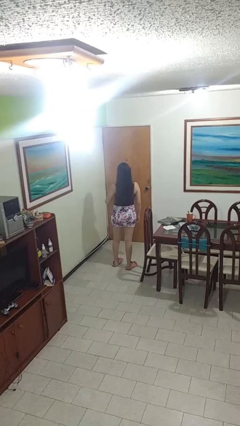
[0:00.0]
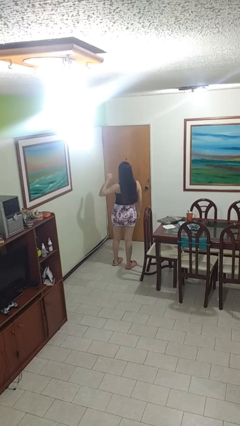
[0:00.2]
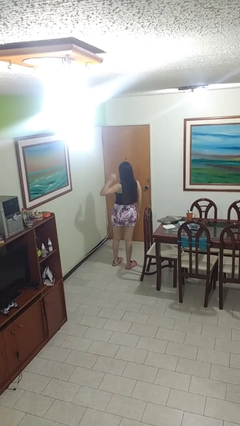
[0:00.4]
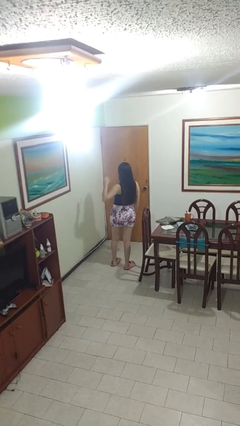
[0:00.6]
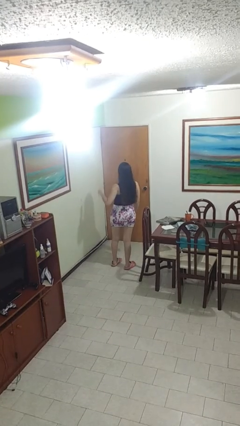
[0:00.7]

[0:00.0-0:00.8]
person gestures behind me

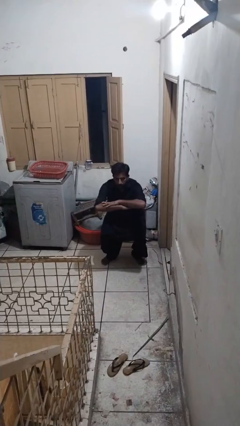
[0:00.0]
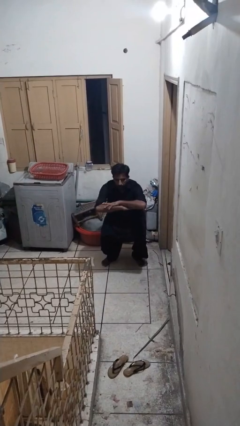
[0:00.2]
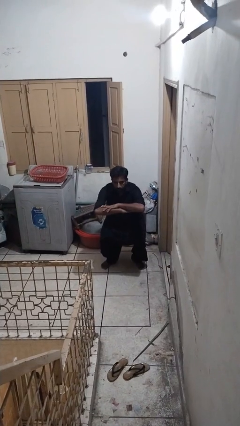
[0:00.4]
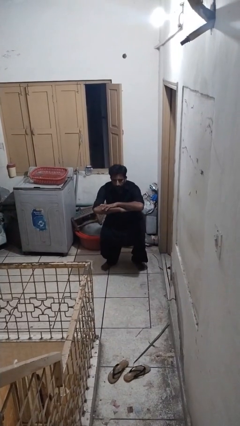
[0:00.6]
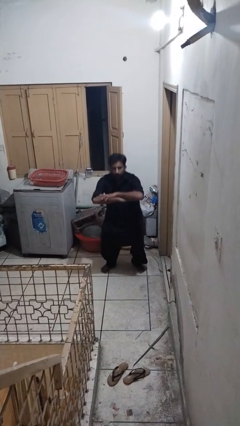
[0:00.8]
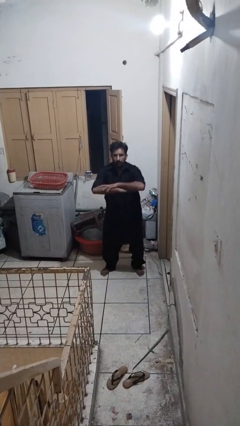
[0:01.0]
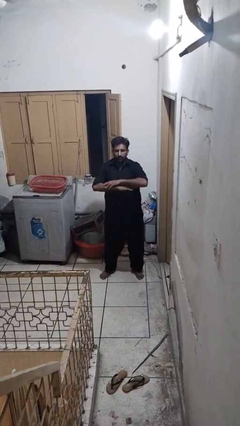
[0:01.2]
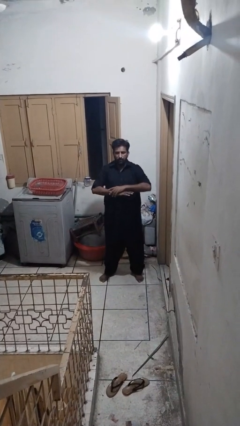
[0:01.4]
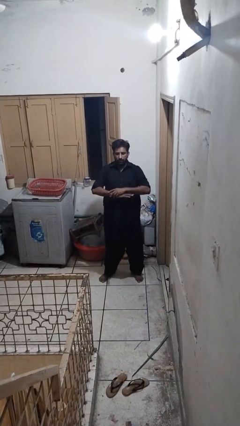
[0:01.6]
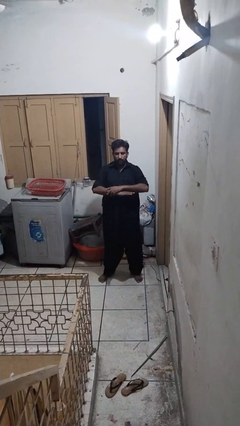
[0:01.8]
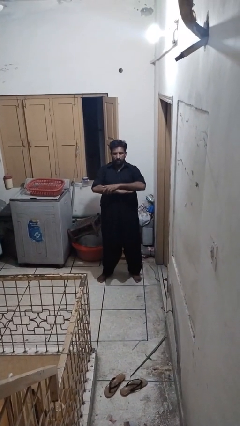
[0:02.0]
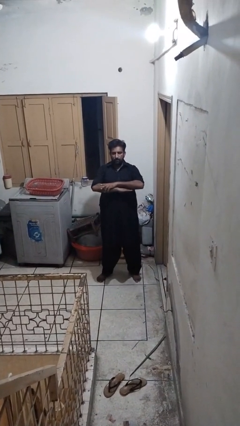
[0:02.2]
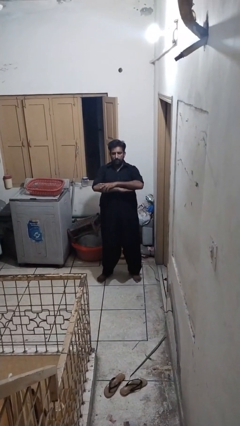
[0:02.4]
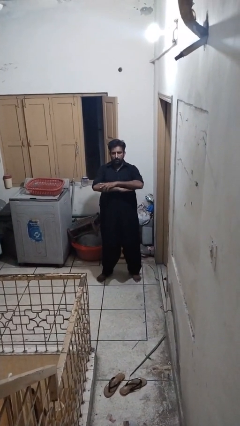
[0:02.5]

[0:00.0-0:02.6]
person stands up

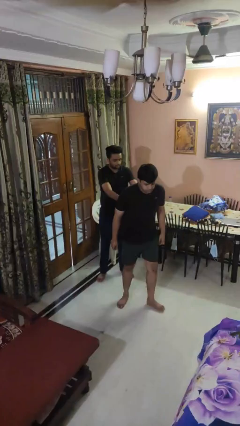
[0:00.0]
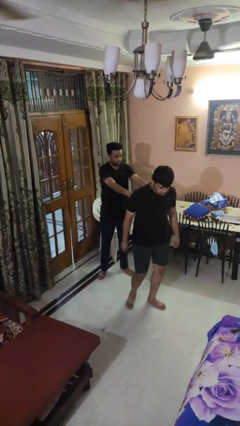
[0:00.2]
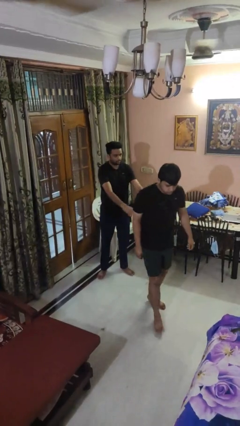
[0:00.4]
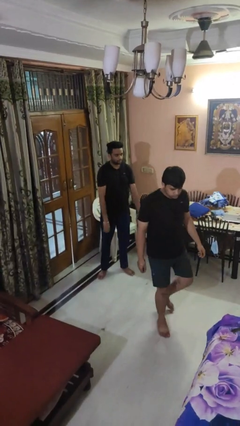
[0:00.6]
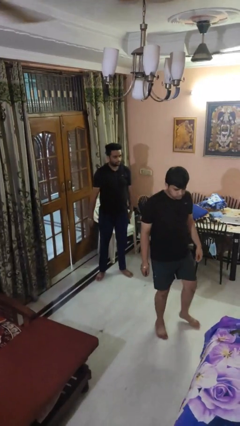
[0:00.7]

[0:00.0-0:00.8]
person shoves person

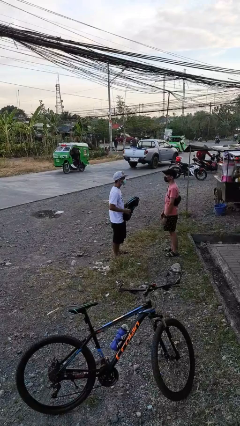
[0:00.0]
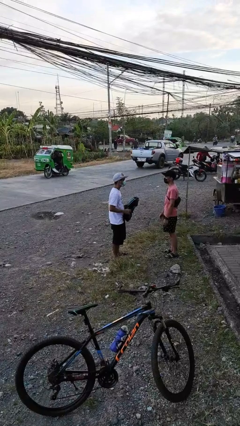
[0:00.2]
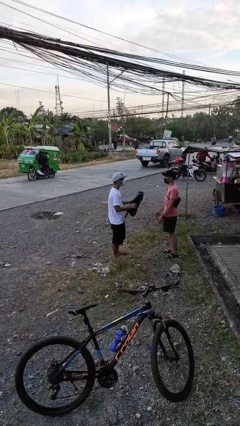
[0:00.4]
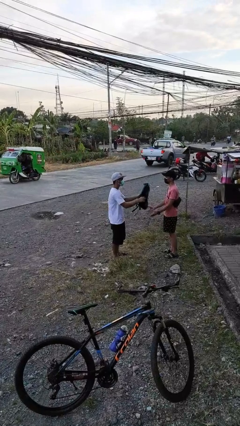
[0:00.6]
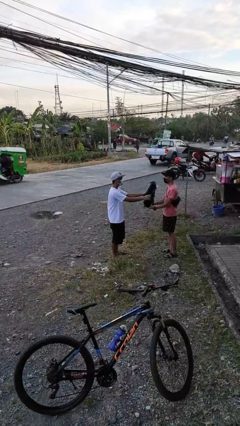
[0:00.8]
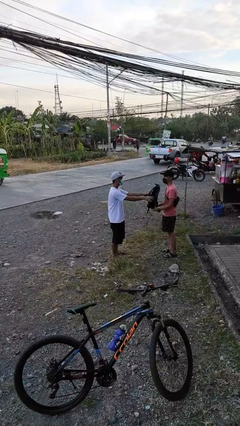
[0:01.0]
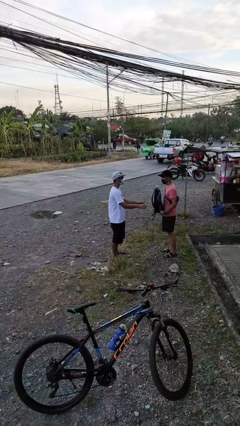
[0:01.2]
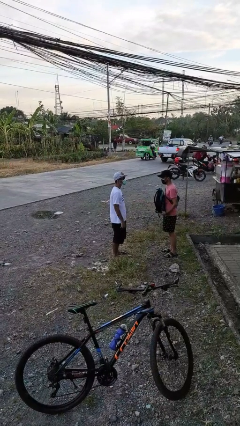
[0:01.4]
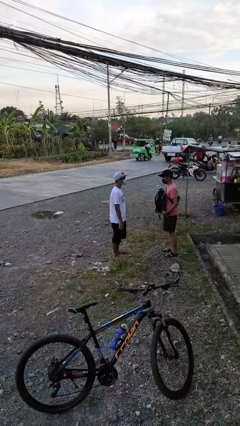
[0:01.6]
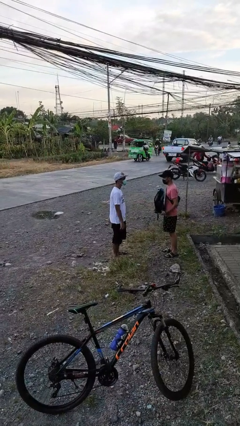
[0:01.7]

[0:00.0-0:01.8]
person transfers object to person

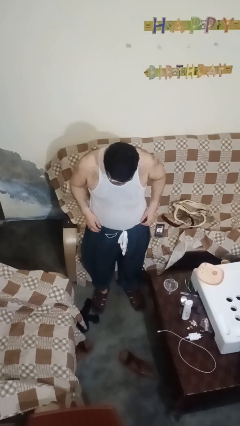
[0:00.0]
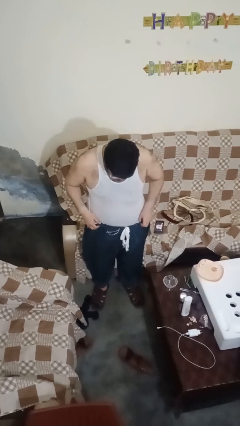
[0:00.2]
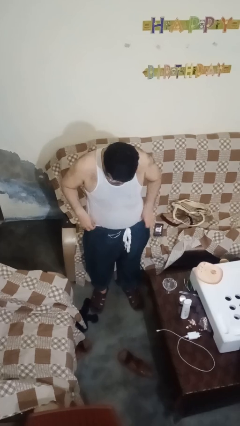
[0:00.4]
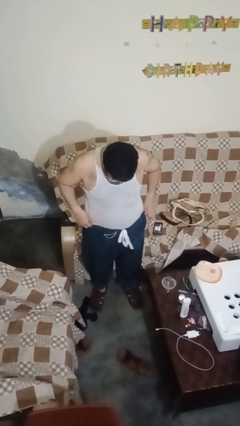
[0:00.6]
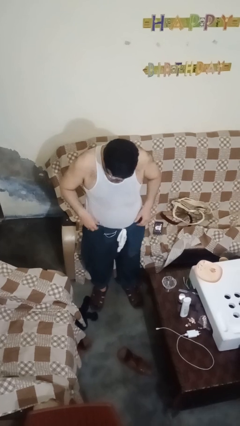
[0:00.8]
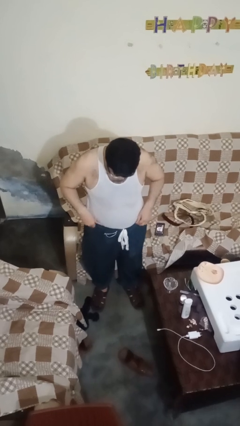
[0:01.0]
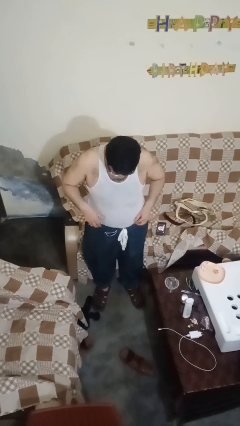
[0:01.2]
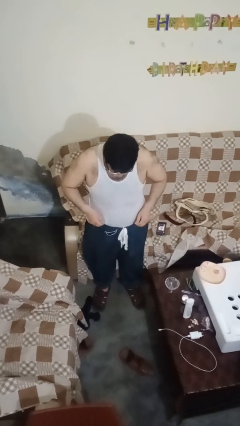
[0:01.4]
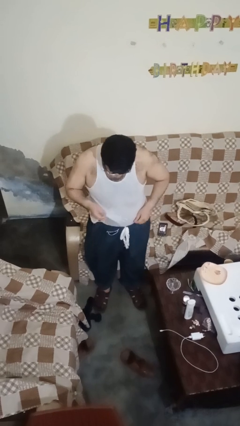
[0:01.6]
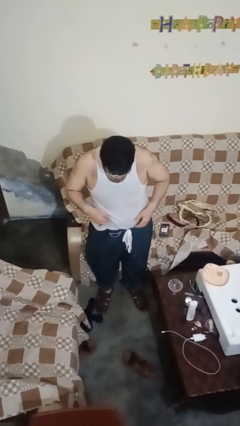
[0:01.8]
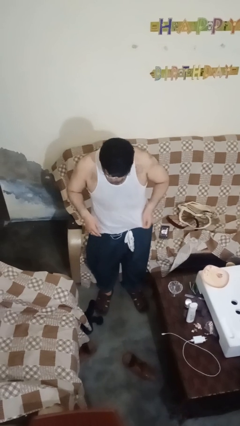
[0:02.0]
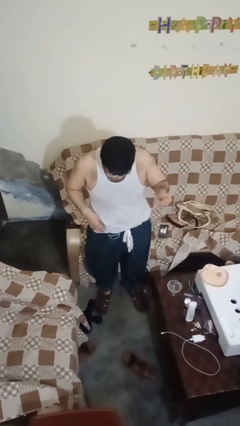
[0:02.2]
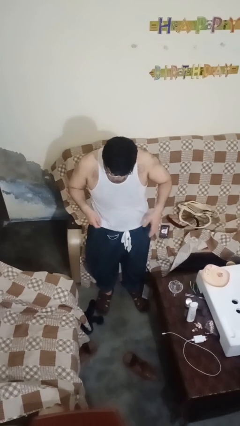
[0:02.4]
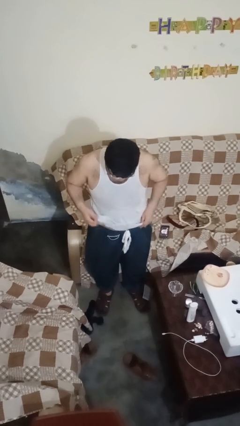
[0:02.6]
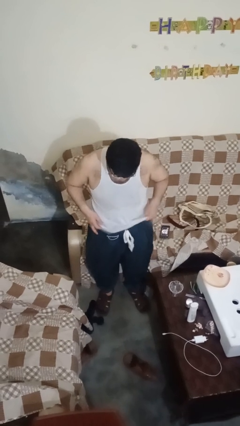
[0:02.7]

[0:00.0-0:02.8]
person untucks shirt

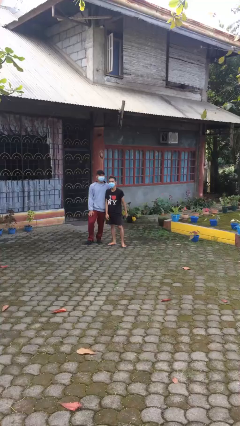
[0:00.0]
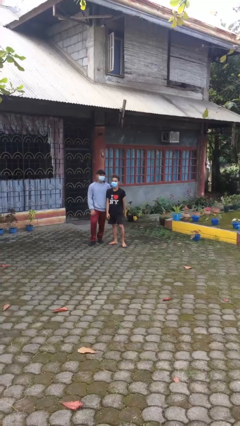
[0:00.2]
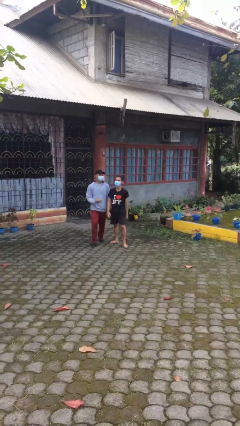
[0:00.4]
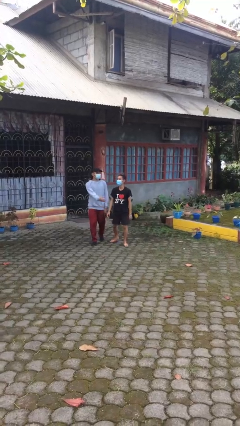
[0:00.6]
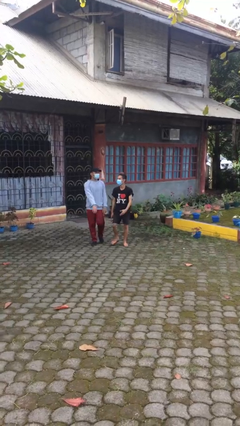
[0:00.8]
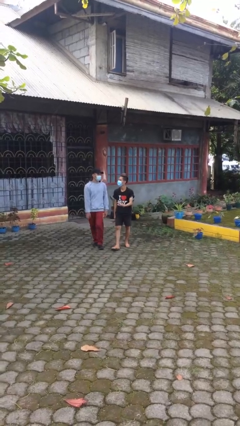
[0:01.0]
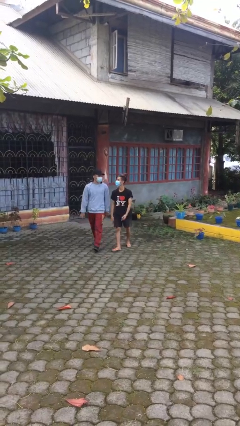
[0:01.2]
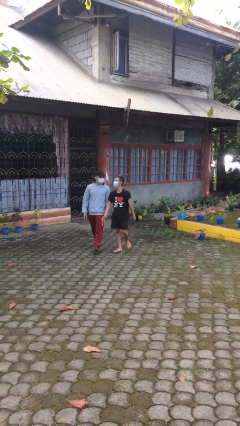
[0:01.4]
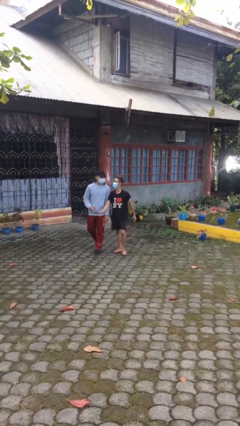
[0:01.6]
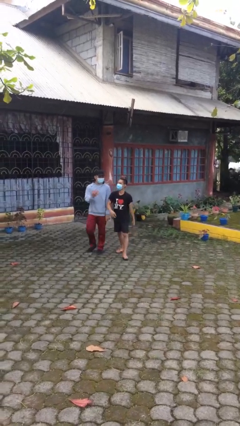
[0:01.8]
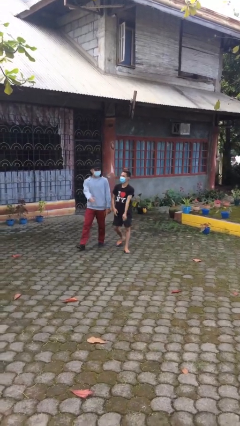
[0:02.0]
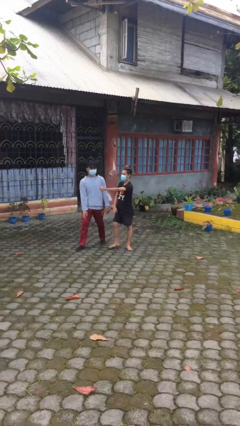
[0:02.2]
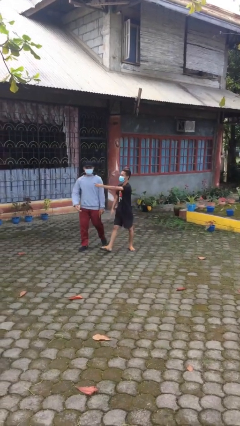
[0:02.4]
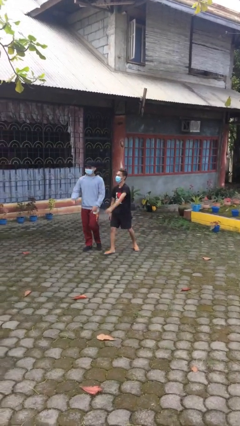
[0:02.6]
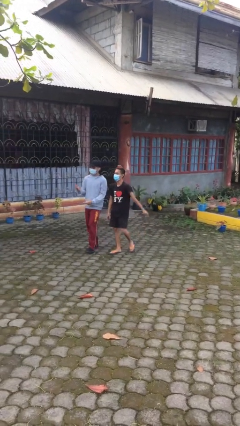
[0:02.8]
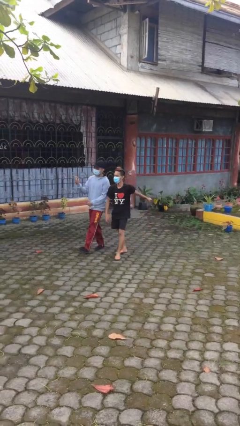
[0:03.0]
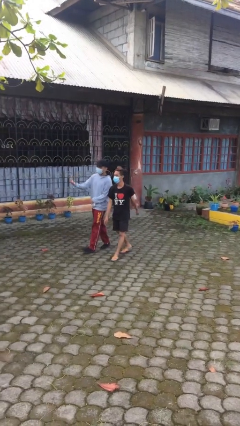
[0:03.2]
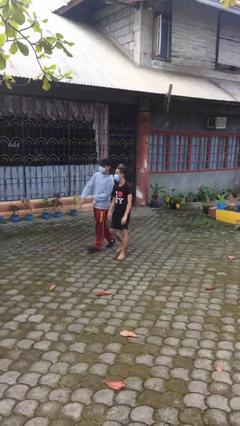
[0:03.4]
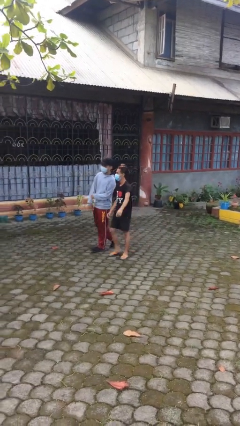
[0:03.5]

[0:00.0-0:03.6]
person talks to person

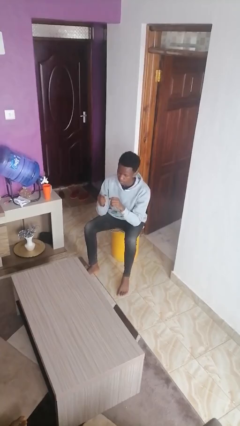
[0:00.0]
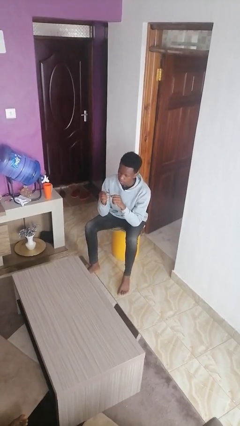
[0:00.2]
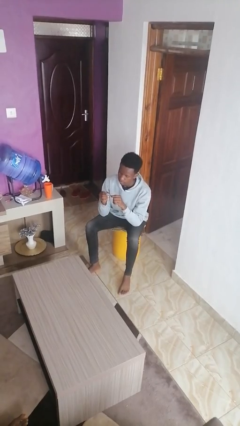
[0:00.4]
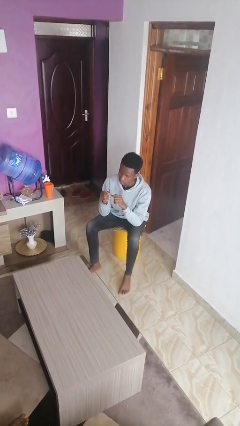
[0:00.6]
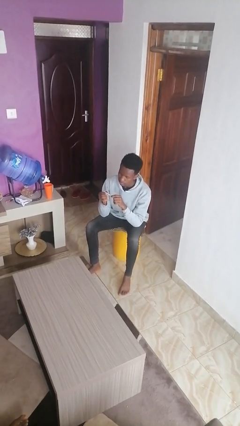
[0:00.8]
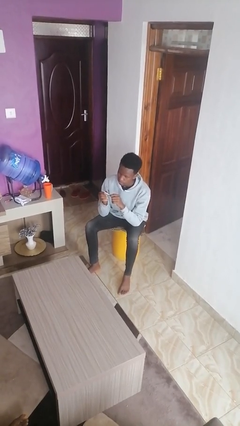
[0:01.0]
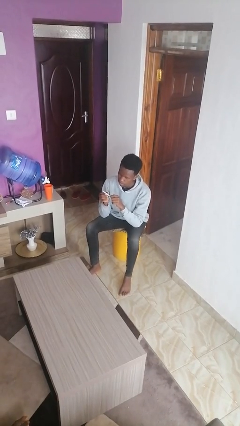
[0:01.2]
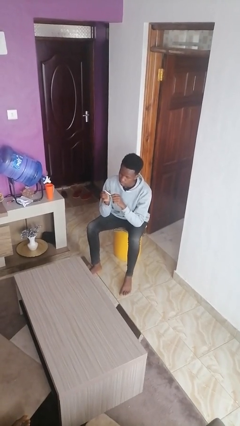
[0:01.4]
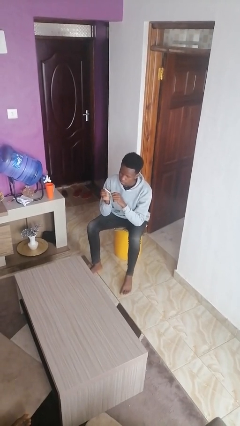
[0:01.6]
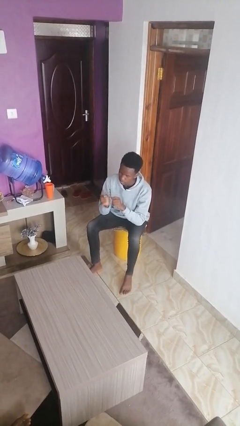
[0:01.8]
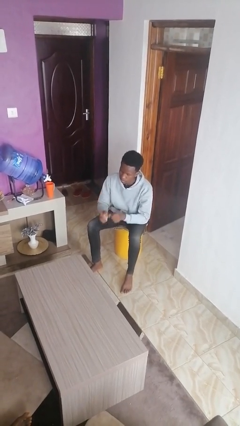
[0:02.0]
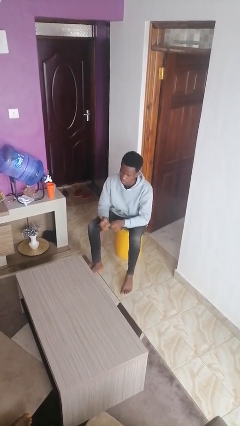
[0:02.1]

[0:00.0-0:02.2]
person files fingernails

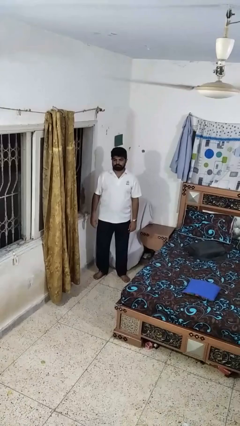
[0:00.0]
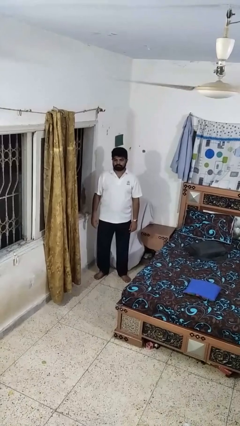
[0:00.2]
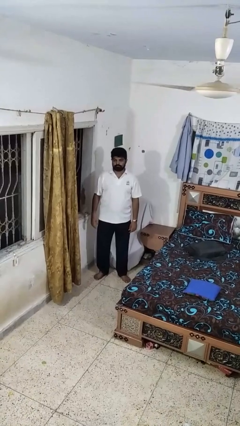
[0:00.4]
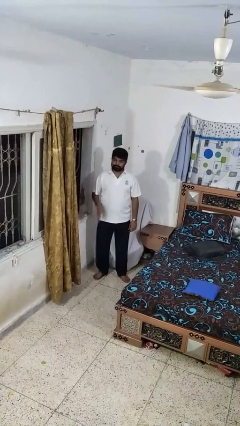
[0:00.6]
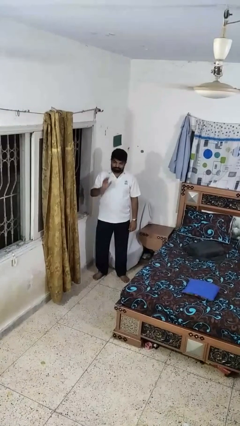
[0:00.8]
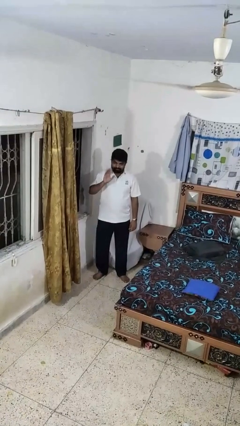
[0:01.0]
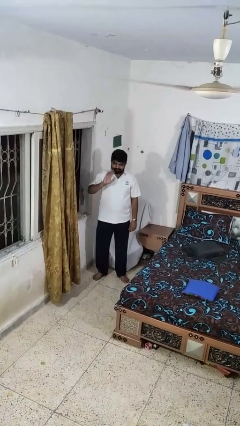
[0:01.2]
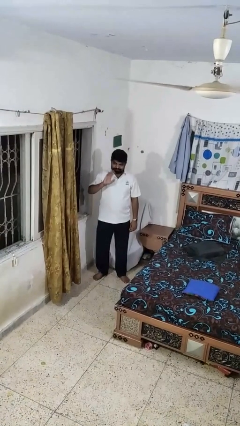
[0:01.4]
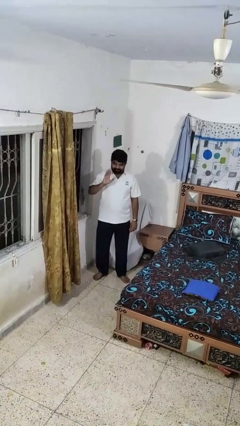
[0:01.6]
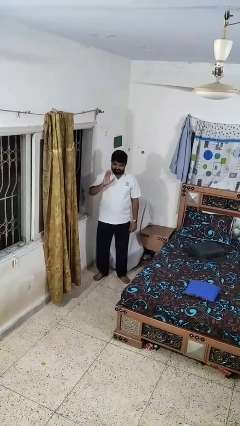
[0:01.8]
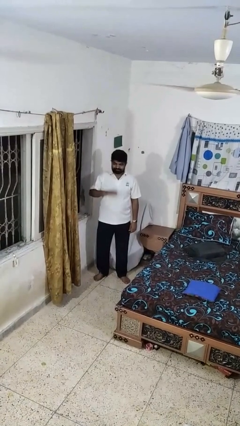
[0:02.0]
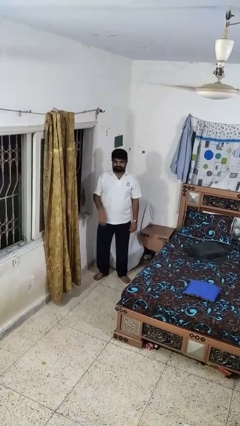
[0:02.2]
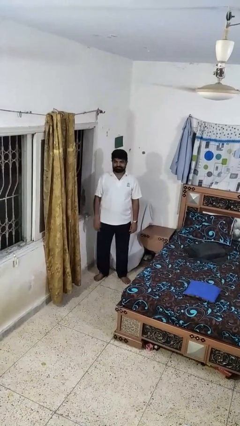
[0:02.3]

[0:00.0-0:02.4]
person waves at person

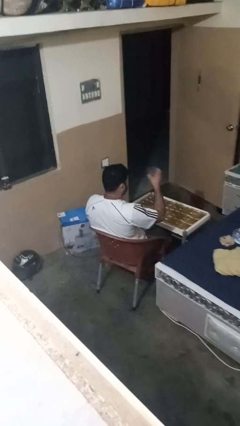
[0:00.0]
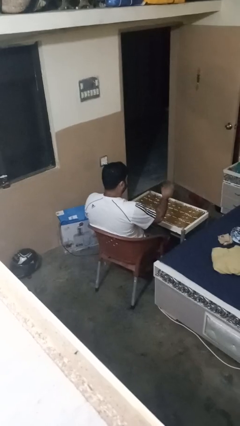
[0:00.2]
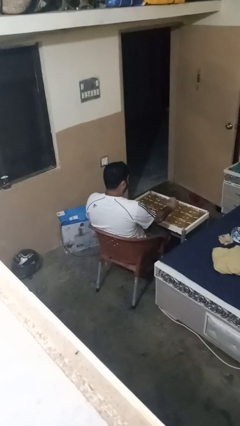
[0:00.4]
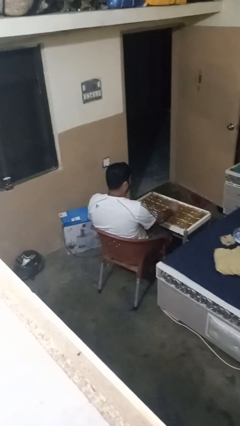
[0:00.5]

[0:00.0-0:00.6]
person puts down object on table
